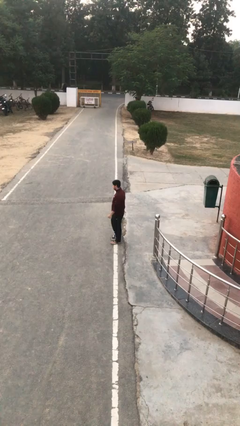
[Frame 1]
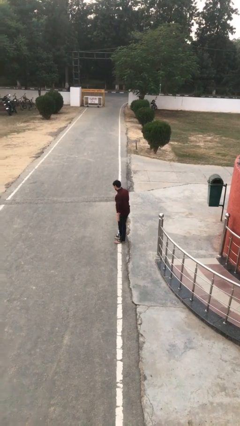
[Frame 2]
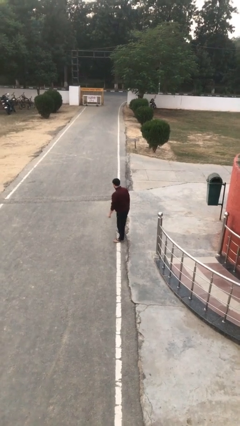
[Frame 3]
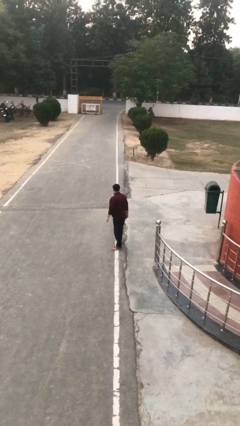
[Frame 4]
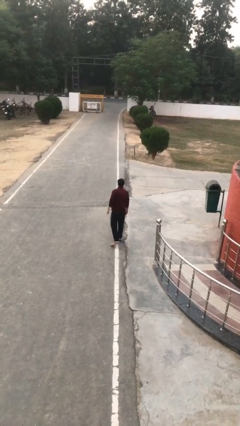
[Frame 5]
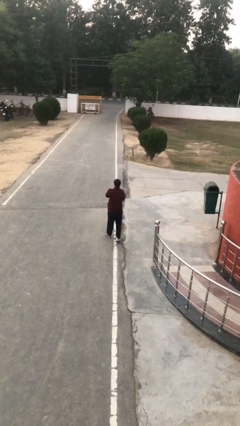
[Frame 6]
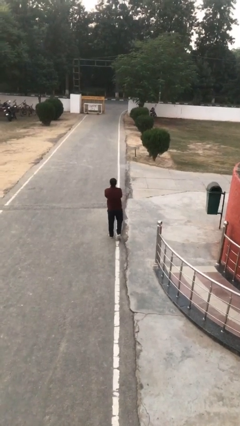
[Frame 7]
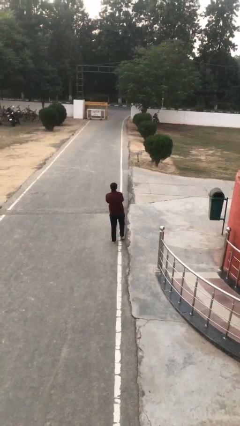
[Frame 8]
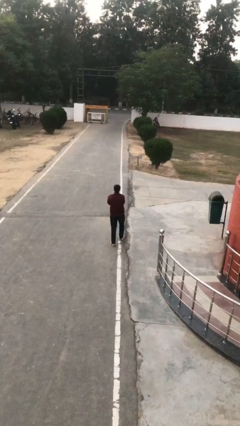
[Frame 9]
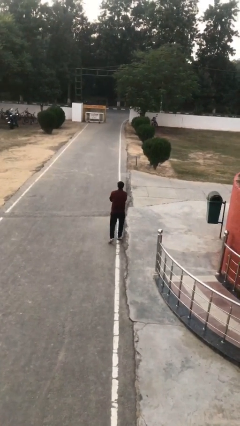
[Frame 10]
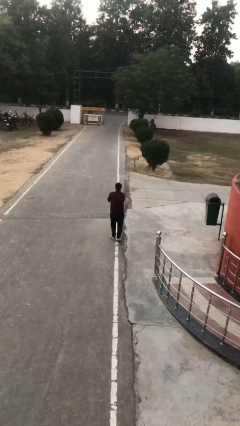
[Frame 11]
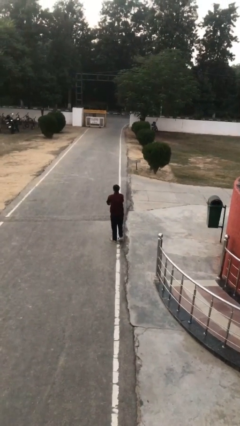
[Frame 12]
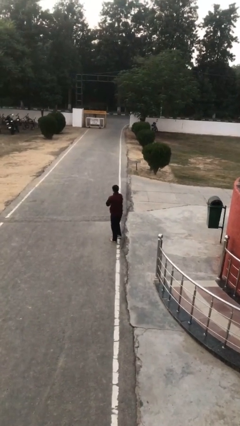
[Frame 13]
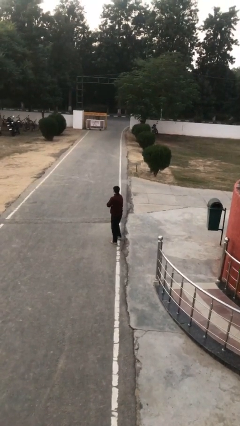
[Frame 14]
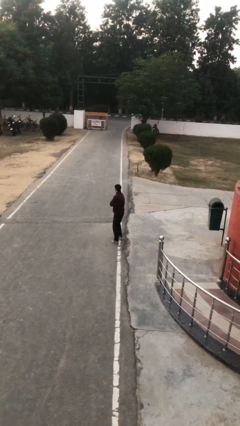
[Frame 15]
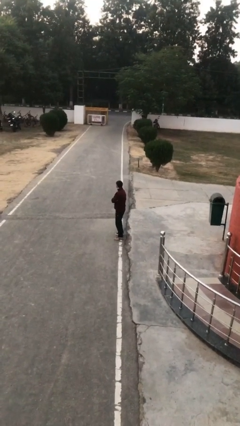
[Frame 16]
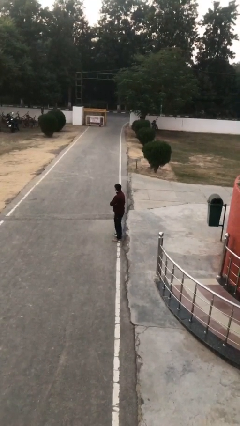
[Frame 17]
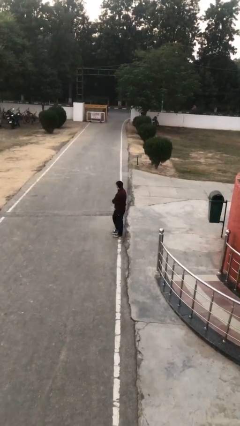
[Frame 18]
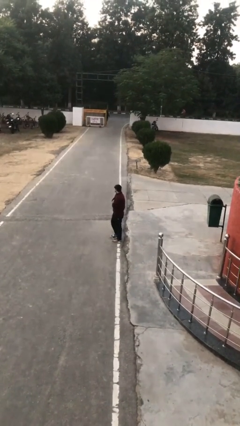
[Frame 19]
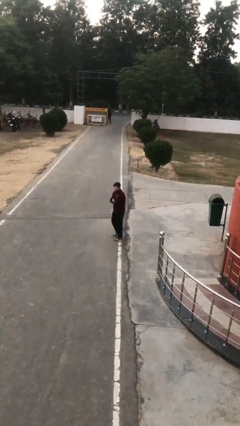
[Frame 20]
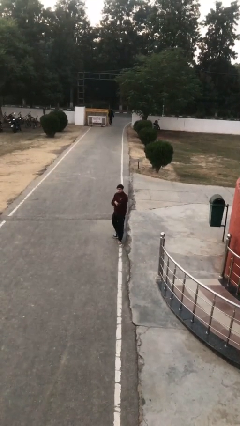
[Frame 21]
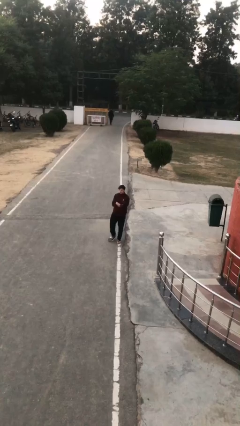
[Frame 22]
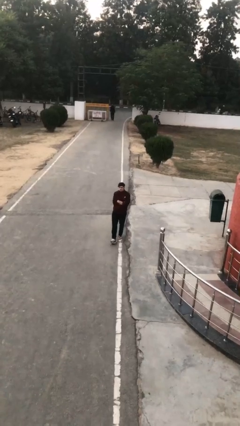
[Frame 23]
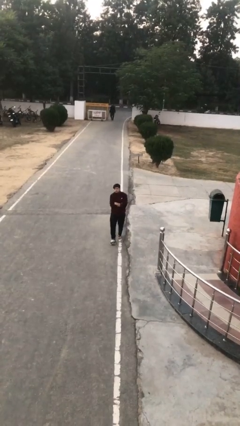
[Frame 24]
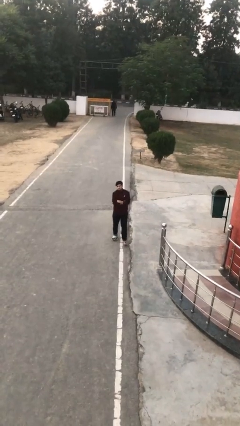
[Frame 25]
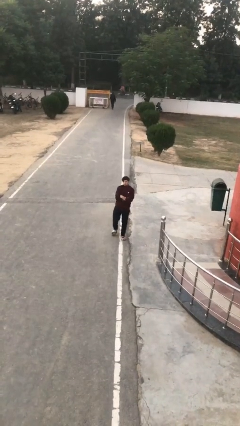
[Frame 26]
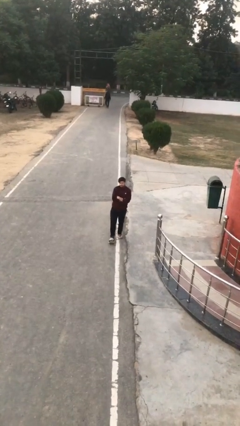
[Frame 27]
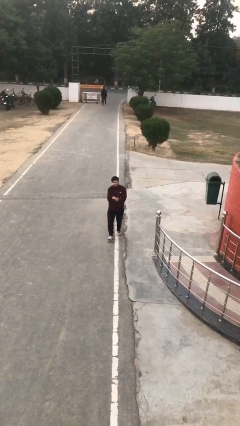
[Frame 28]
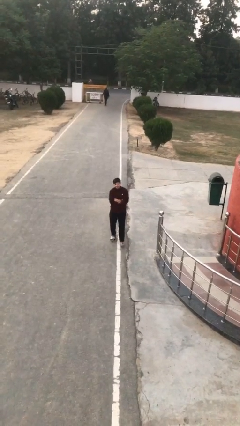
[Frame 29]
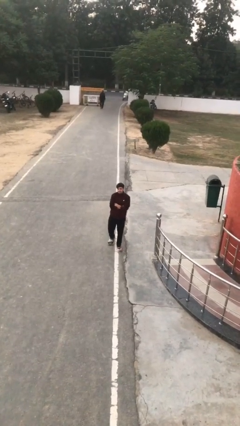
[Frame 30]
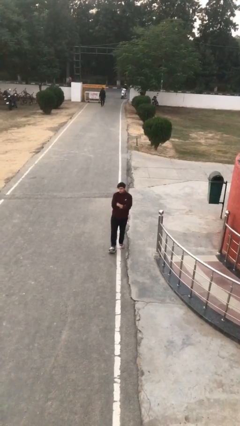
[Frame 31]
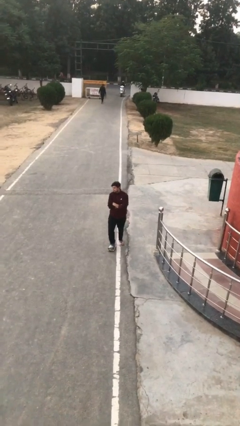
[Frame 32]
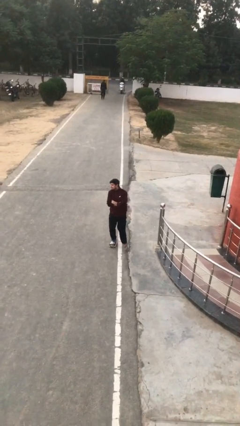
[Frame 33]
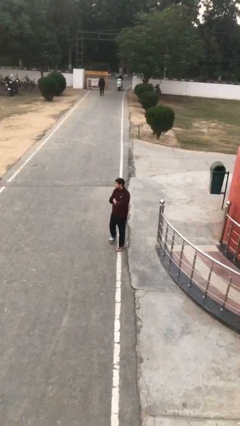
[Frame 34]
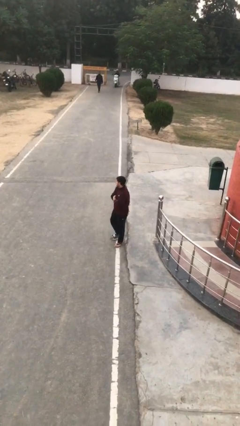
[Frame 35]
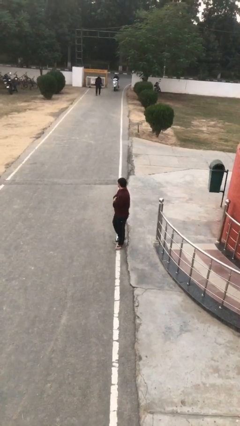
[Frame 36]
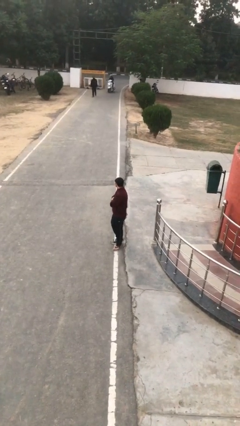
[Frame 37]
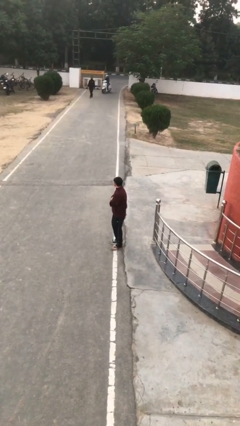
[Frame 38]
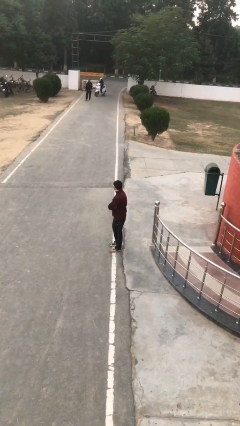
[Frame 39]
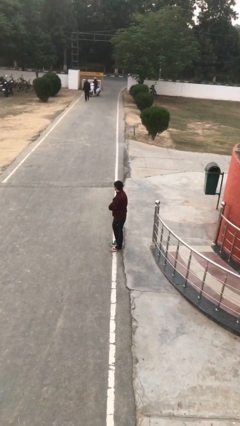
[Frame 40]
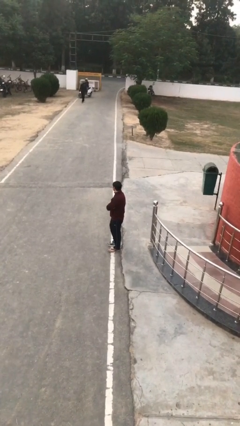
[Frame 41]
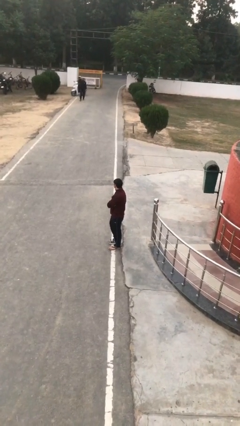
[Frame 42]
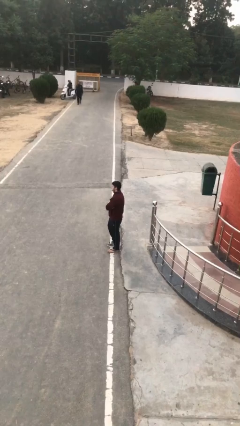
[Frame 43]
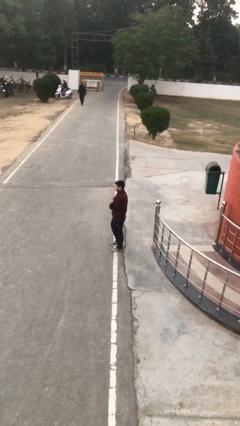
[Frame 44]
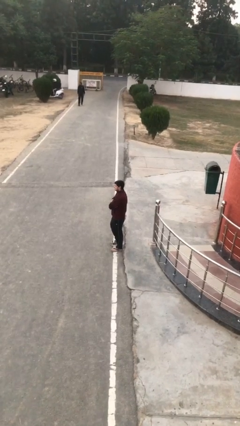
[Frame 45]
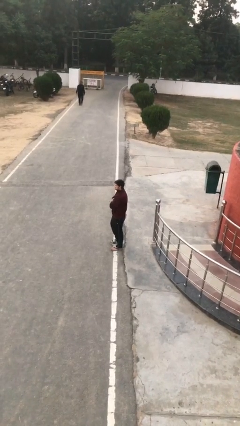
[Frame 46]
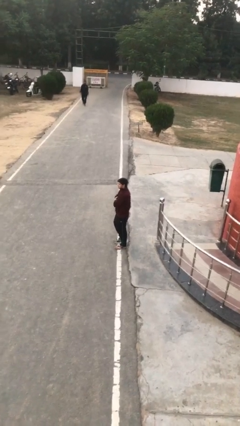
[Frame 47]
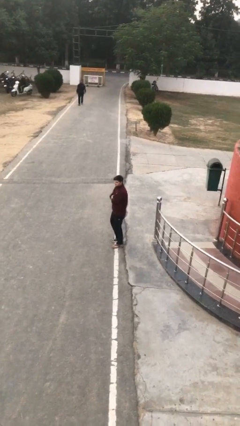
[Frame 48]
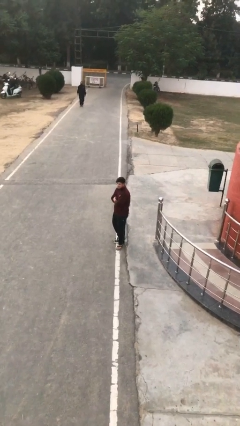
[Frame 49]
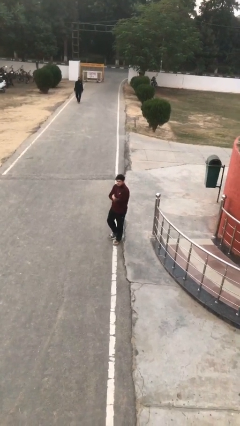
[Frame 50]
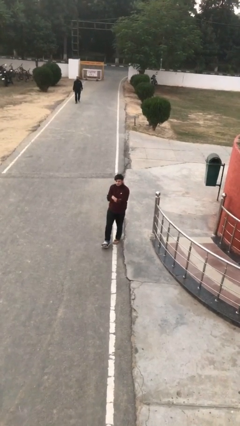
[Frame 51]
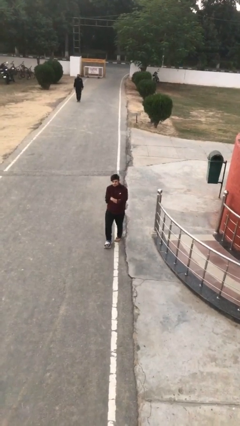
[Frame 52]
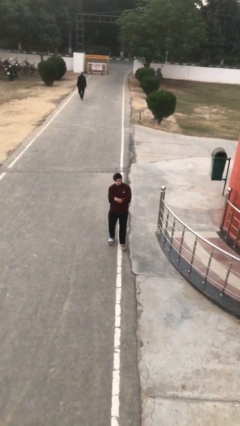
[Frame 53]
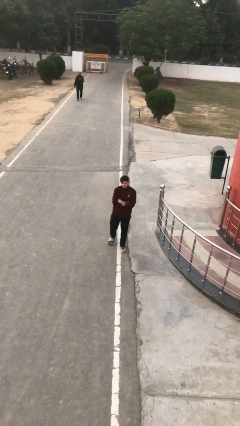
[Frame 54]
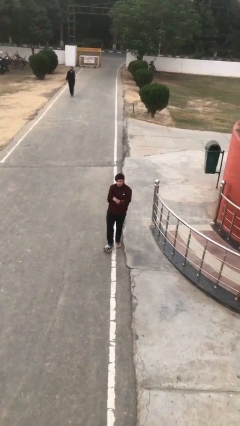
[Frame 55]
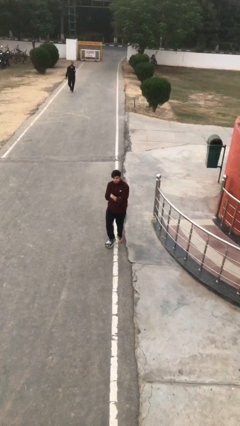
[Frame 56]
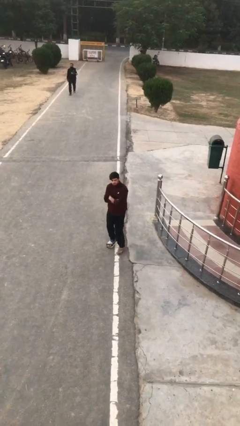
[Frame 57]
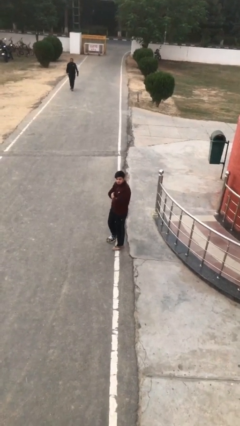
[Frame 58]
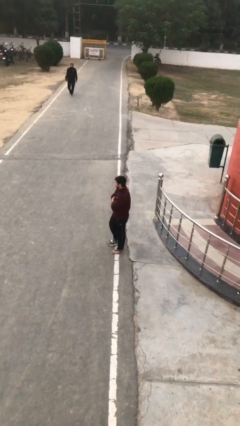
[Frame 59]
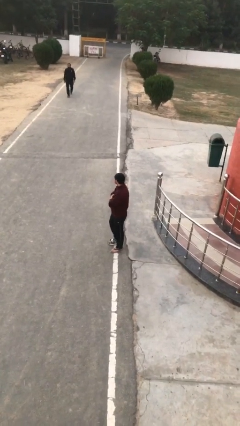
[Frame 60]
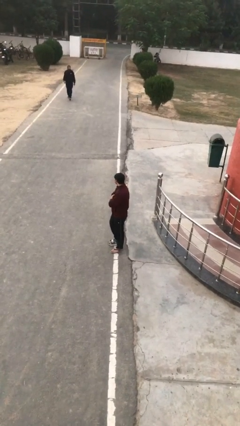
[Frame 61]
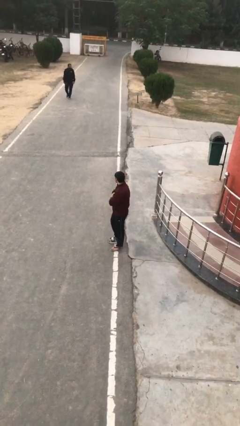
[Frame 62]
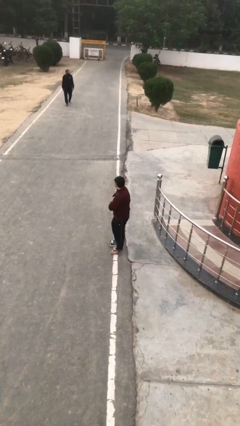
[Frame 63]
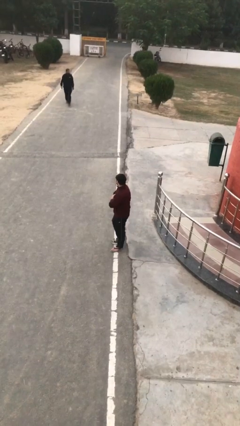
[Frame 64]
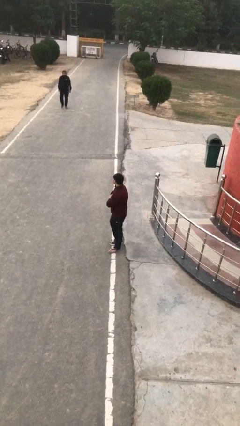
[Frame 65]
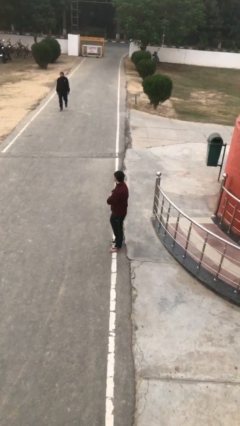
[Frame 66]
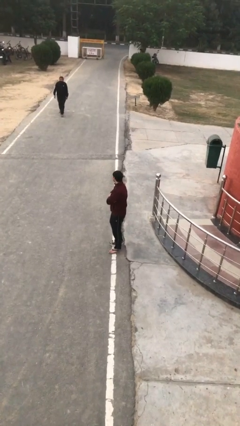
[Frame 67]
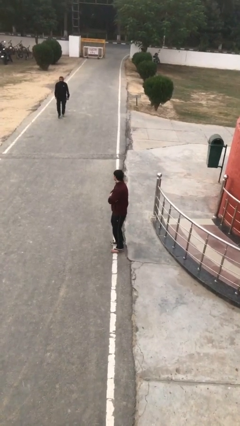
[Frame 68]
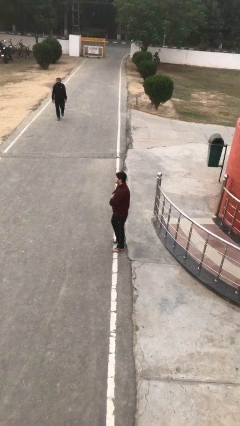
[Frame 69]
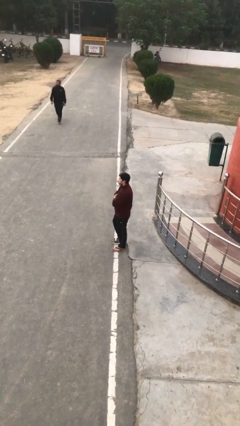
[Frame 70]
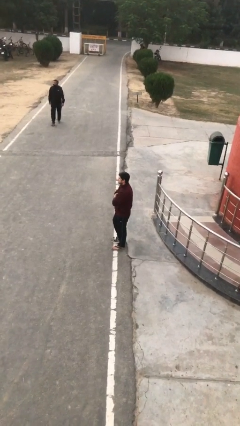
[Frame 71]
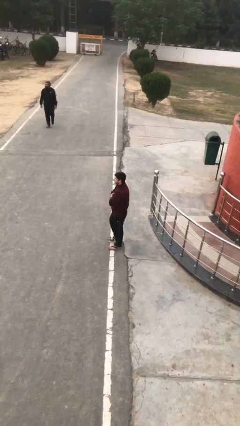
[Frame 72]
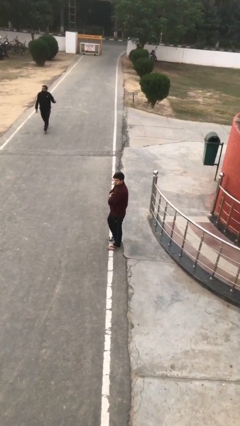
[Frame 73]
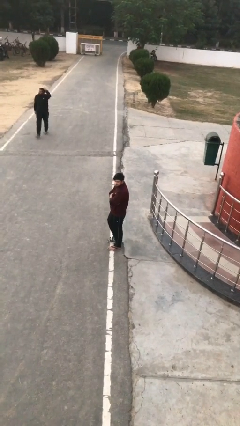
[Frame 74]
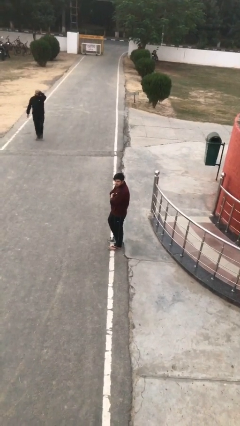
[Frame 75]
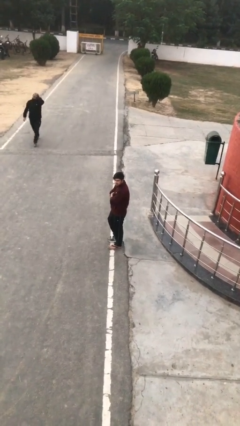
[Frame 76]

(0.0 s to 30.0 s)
person walks

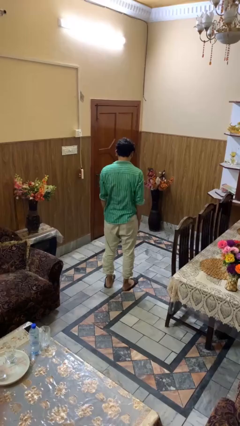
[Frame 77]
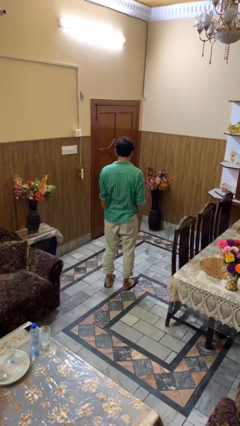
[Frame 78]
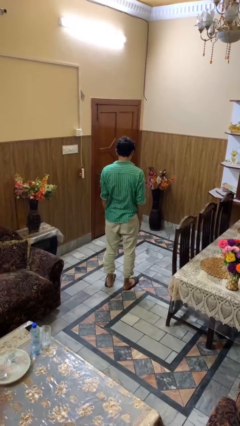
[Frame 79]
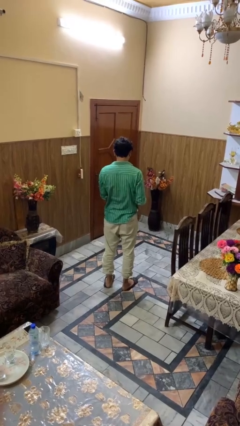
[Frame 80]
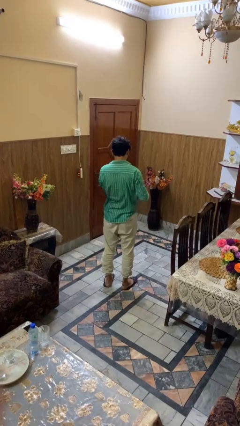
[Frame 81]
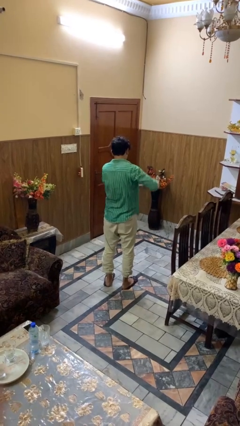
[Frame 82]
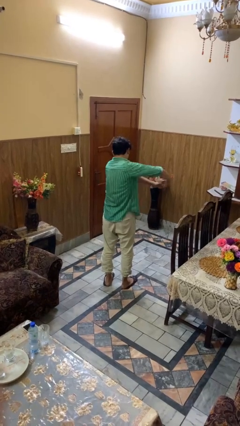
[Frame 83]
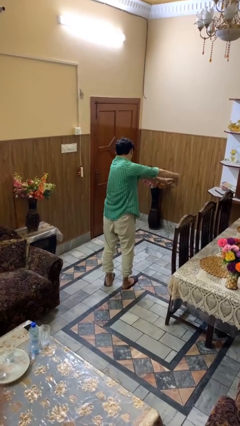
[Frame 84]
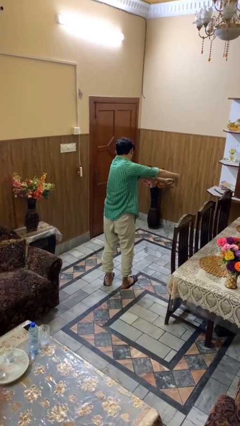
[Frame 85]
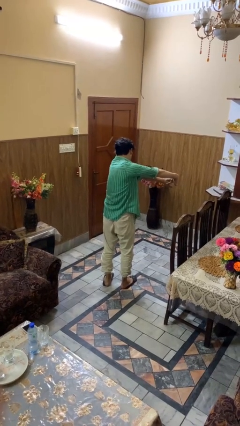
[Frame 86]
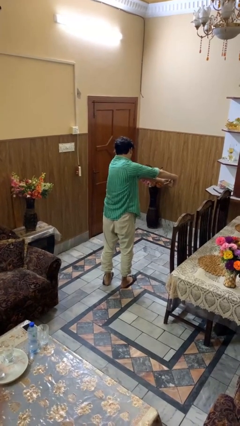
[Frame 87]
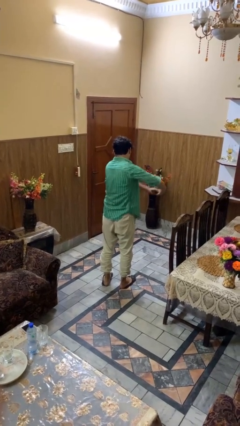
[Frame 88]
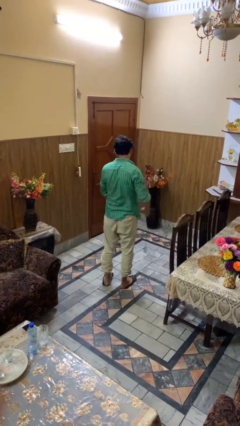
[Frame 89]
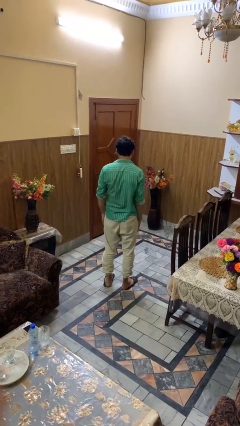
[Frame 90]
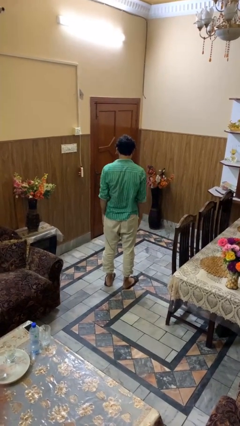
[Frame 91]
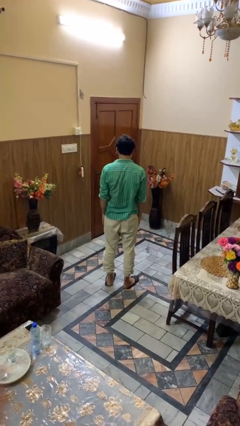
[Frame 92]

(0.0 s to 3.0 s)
person stretches arms to side
